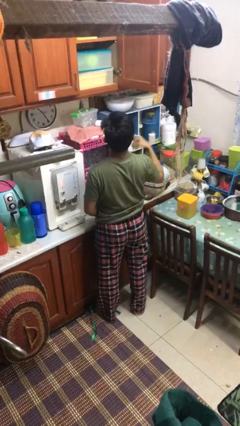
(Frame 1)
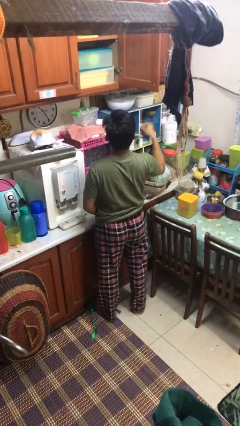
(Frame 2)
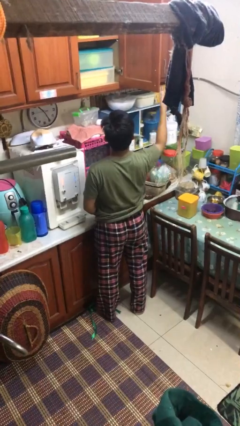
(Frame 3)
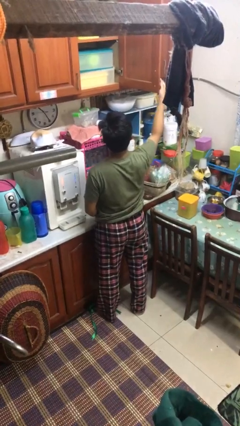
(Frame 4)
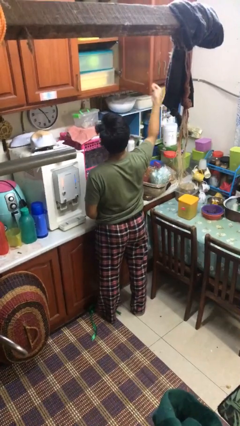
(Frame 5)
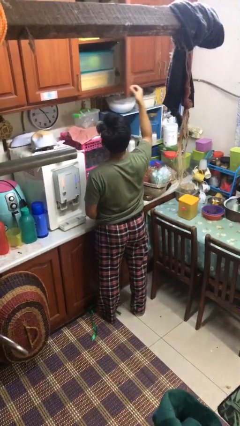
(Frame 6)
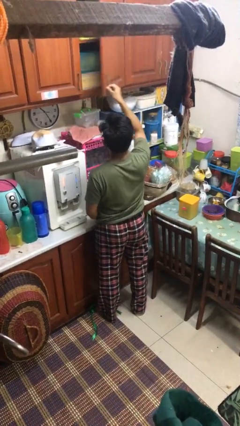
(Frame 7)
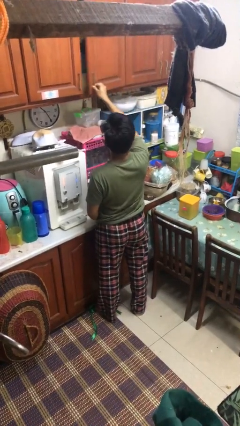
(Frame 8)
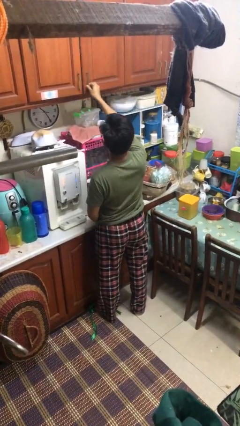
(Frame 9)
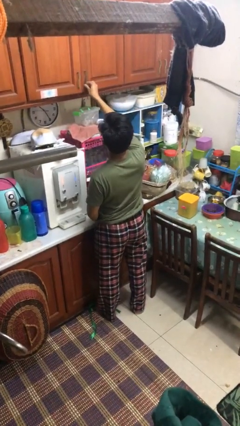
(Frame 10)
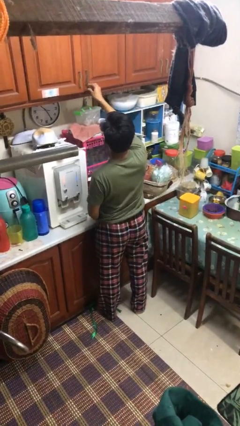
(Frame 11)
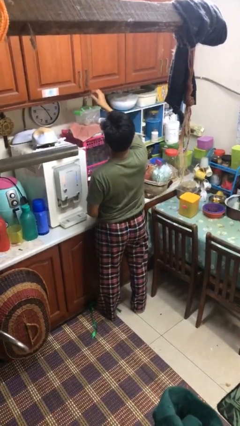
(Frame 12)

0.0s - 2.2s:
person closes kitchen drawer

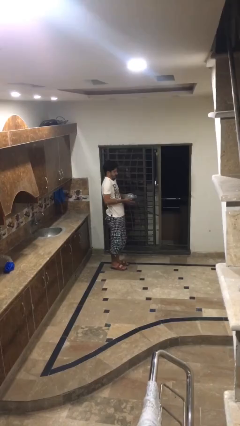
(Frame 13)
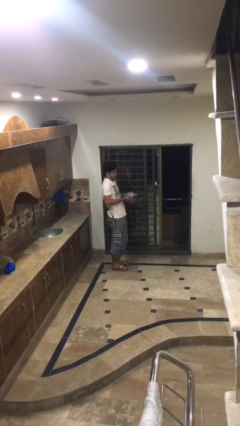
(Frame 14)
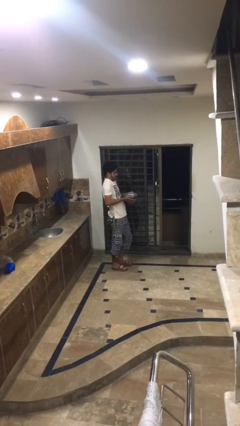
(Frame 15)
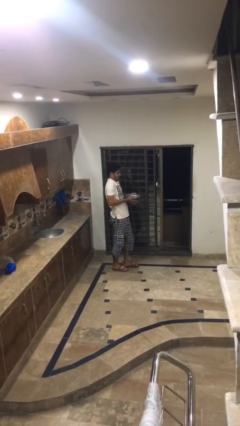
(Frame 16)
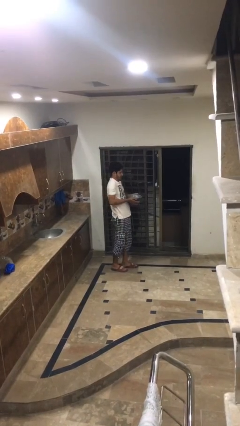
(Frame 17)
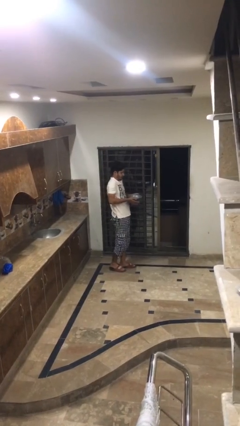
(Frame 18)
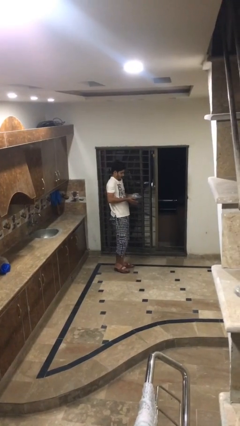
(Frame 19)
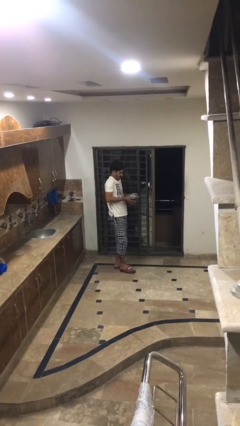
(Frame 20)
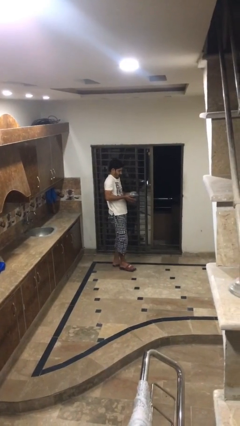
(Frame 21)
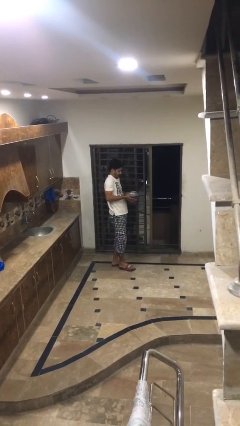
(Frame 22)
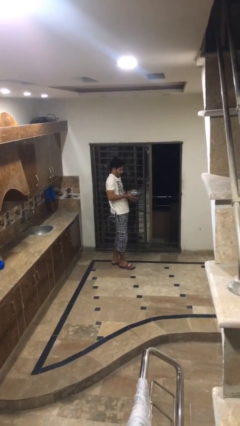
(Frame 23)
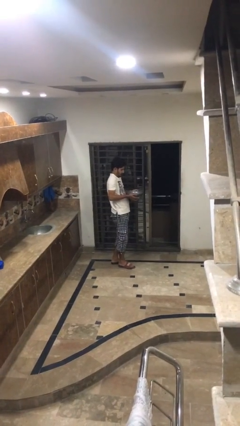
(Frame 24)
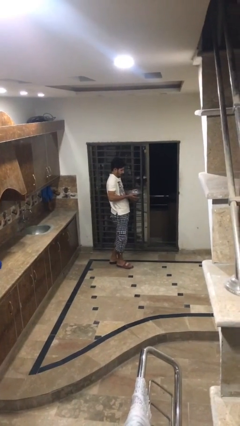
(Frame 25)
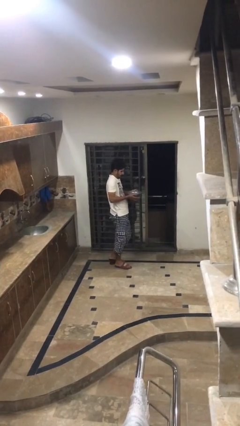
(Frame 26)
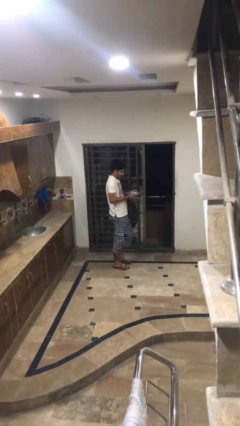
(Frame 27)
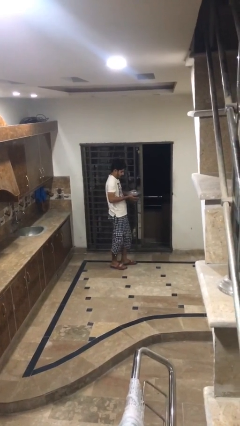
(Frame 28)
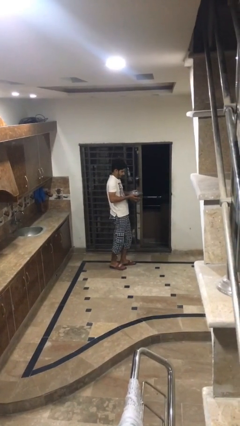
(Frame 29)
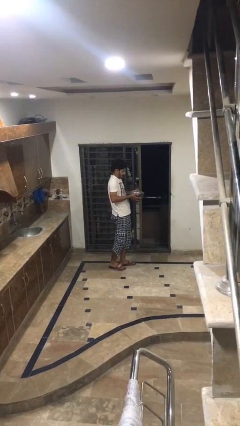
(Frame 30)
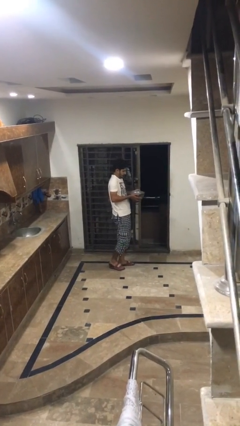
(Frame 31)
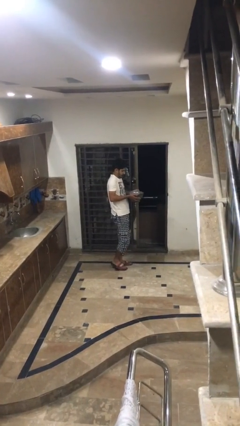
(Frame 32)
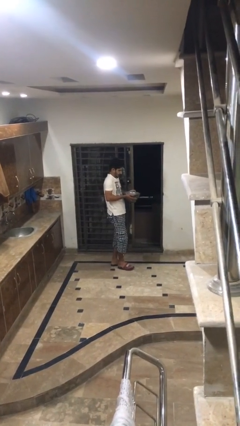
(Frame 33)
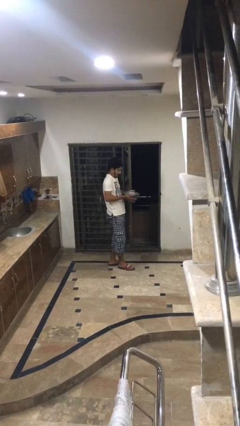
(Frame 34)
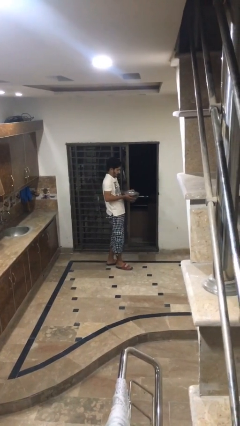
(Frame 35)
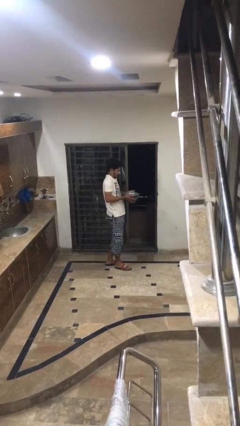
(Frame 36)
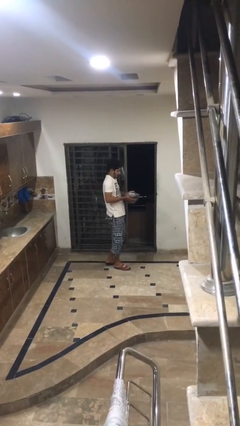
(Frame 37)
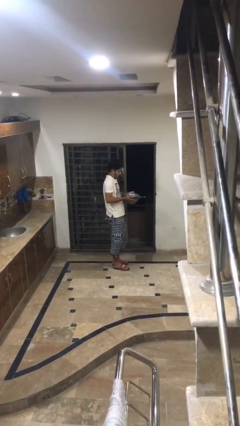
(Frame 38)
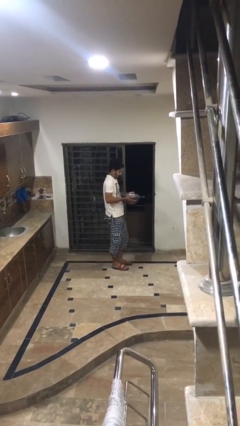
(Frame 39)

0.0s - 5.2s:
person carries heavy object

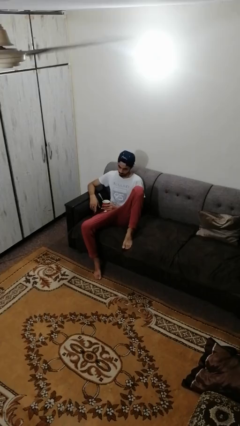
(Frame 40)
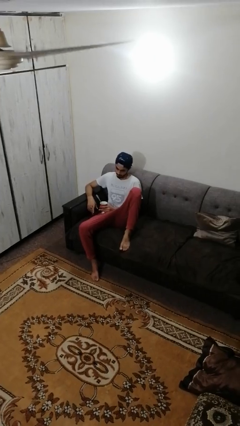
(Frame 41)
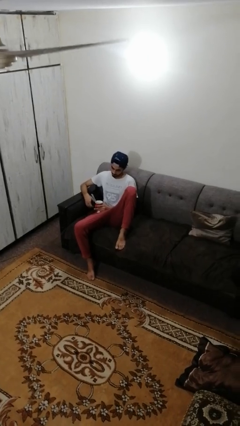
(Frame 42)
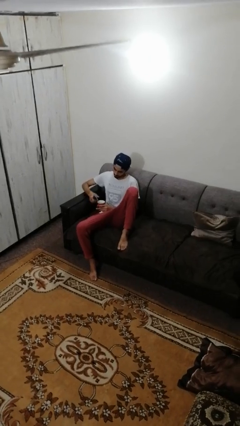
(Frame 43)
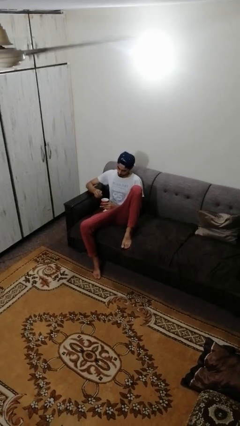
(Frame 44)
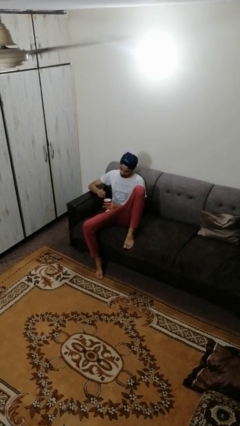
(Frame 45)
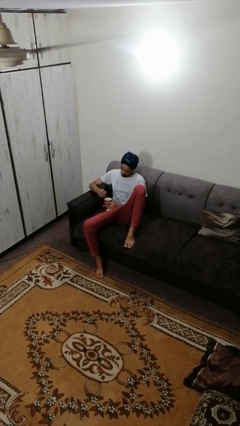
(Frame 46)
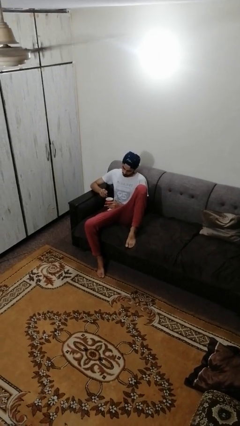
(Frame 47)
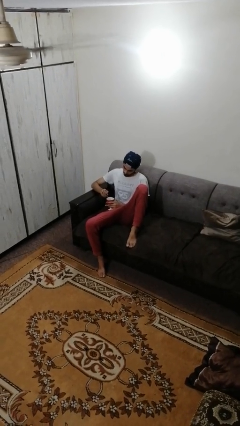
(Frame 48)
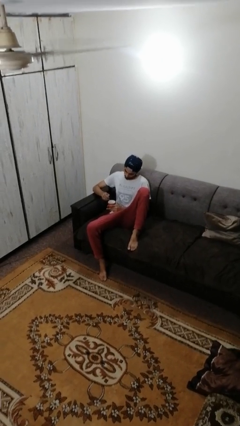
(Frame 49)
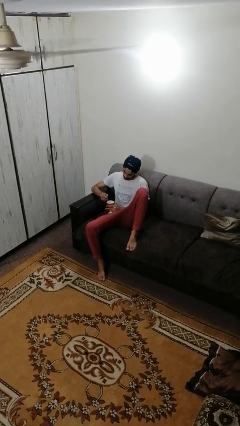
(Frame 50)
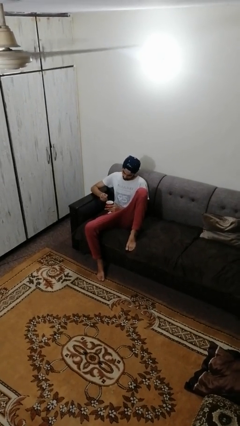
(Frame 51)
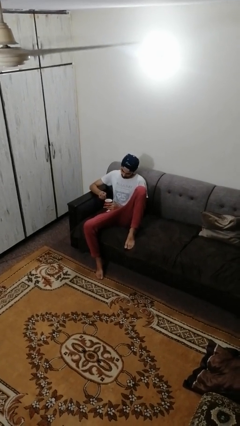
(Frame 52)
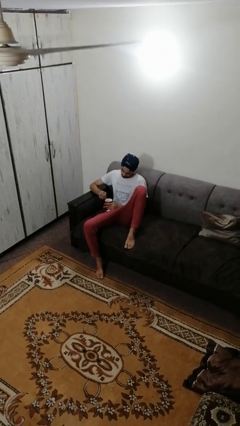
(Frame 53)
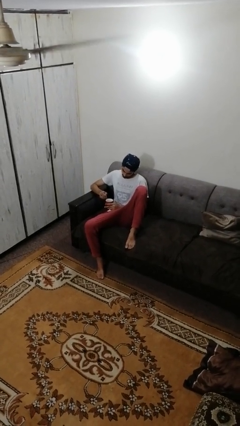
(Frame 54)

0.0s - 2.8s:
person stirs mug

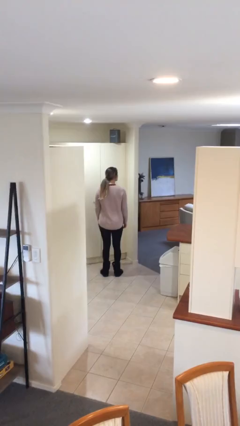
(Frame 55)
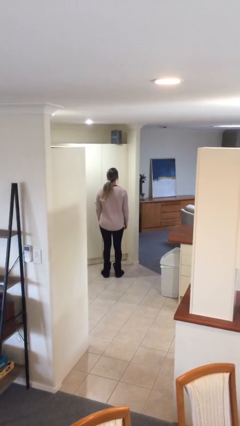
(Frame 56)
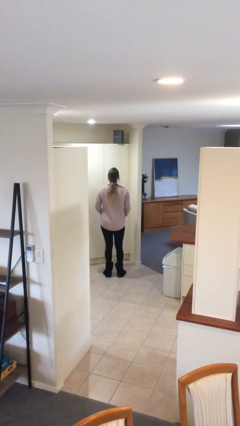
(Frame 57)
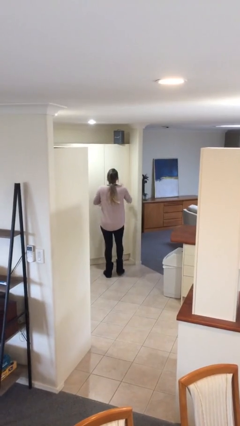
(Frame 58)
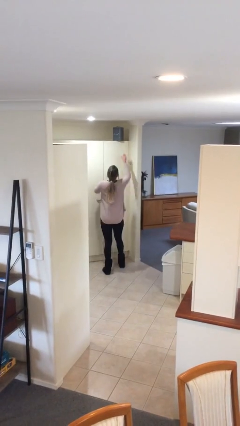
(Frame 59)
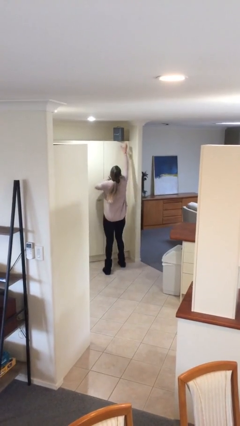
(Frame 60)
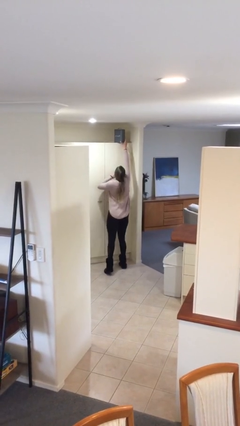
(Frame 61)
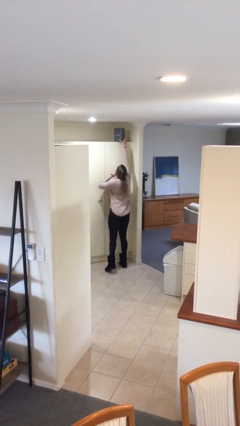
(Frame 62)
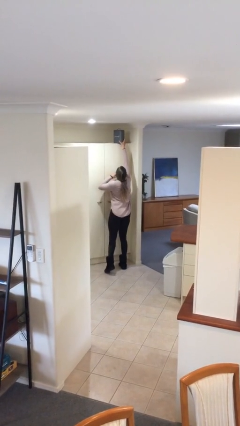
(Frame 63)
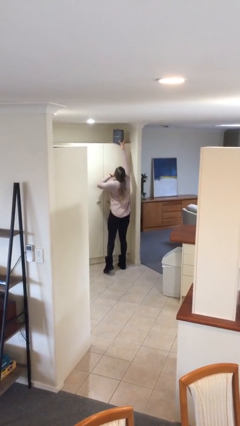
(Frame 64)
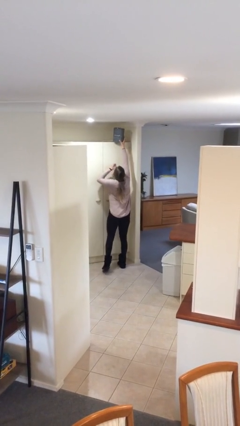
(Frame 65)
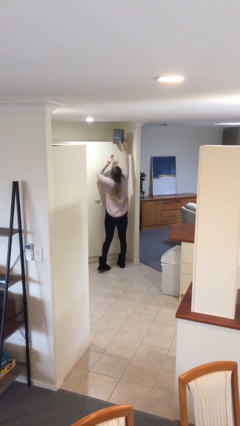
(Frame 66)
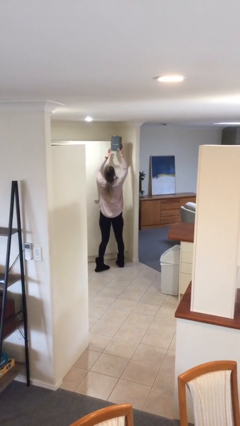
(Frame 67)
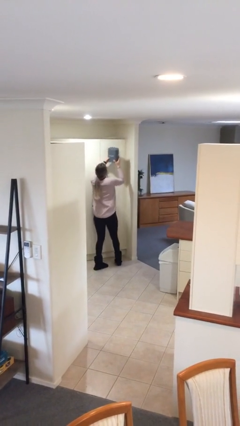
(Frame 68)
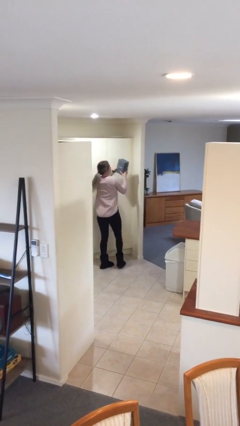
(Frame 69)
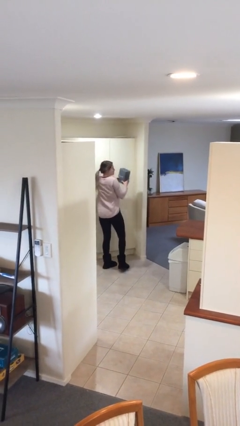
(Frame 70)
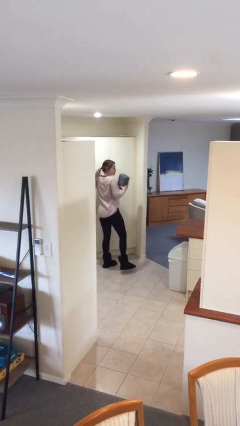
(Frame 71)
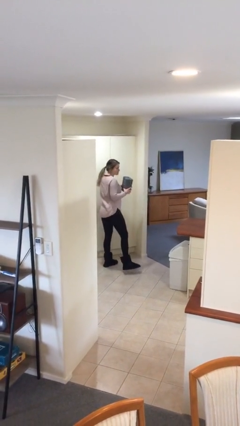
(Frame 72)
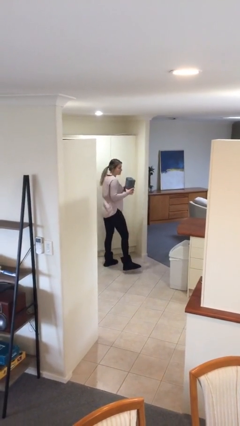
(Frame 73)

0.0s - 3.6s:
person picks up object from shelf

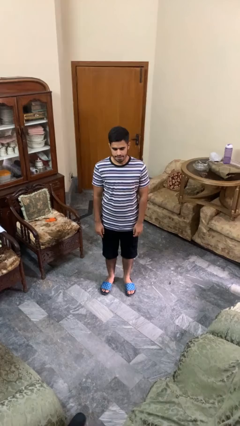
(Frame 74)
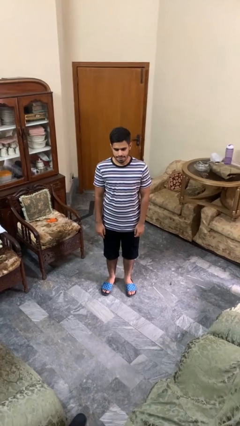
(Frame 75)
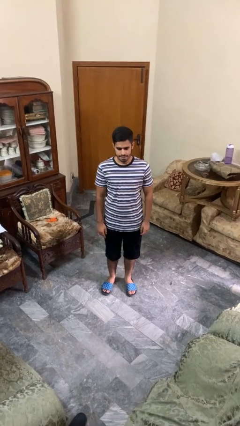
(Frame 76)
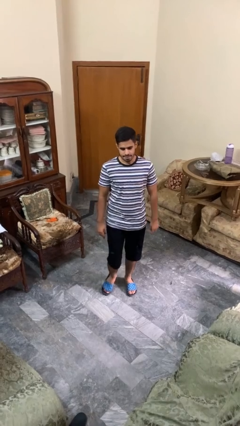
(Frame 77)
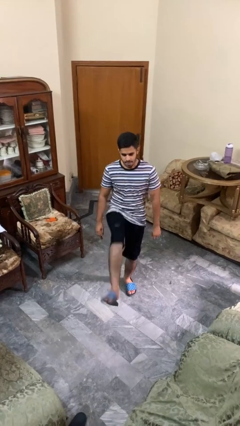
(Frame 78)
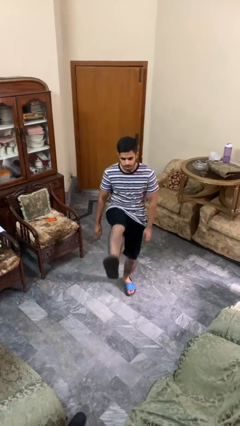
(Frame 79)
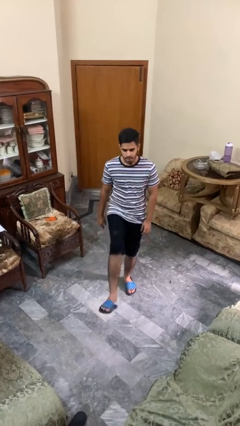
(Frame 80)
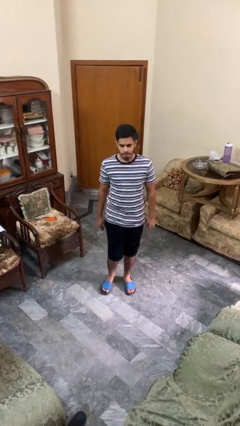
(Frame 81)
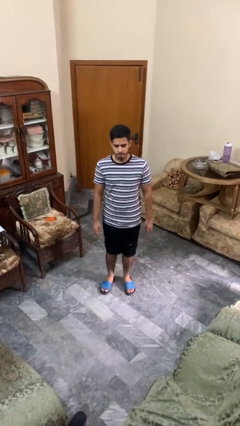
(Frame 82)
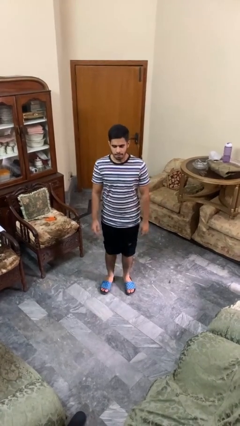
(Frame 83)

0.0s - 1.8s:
person karate kicks

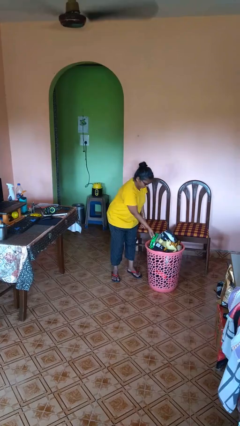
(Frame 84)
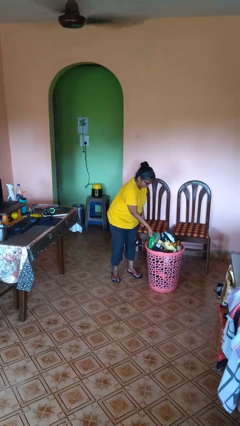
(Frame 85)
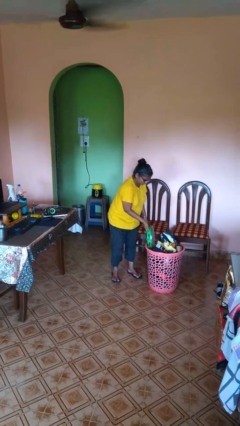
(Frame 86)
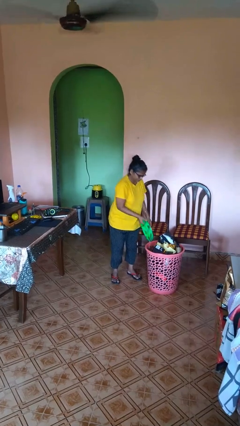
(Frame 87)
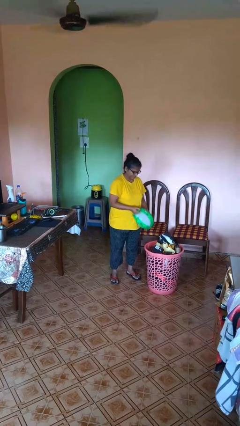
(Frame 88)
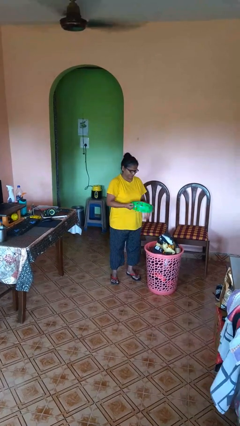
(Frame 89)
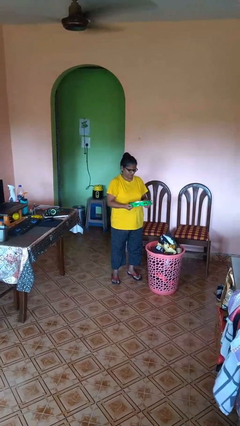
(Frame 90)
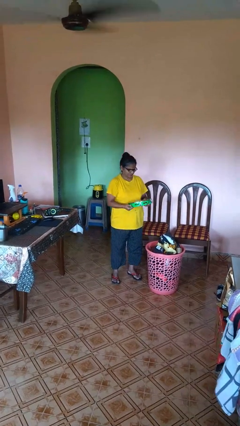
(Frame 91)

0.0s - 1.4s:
person takes object from basket
